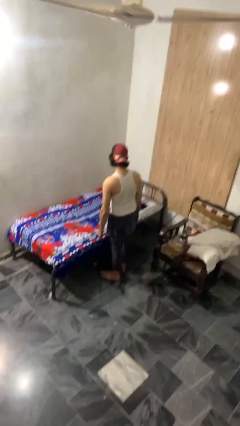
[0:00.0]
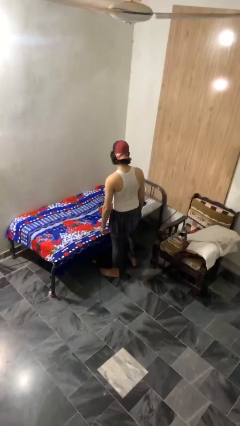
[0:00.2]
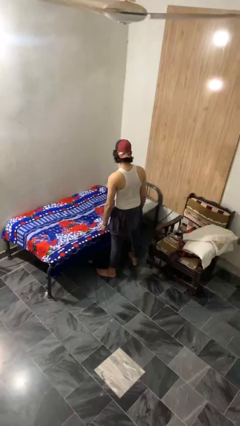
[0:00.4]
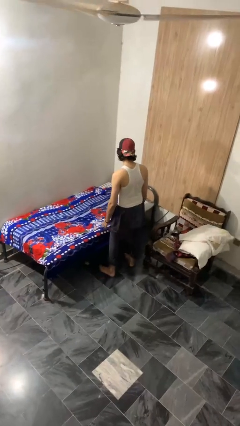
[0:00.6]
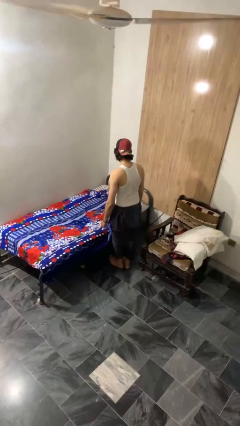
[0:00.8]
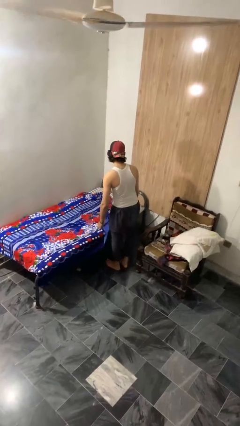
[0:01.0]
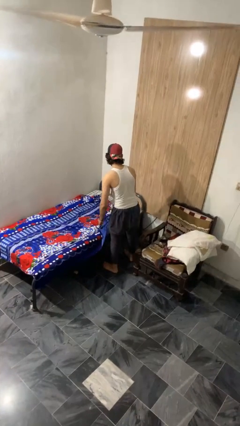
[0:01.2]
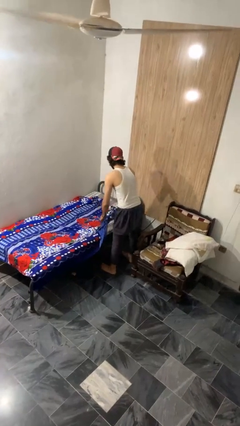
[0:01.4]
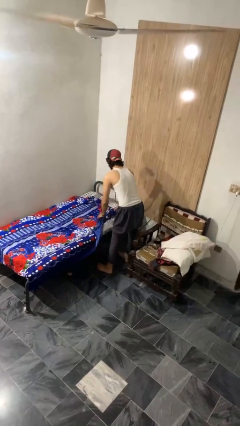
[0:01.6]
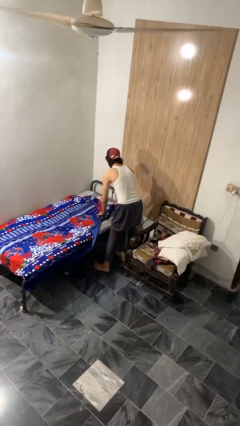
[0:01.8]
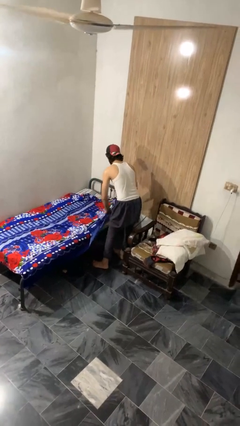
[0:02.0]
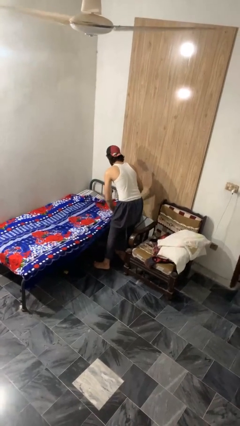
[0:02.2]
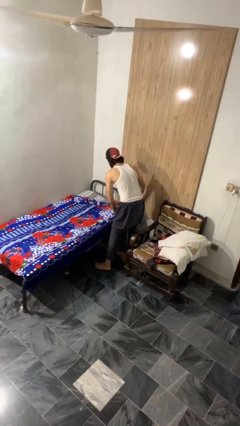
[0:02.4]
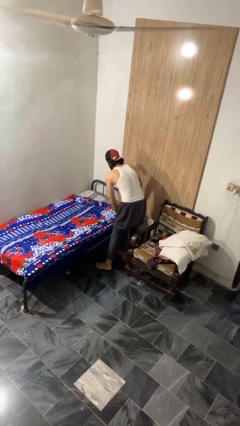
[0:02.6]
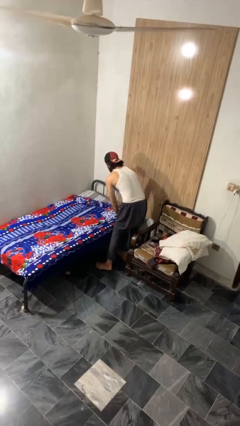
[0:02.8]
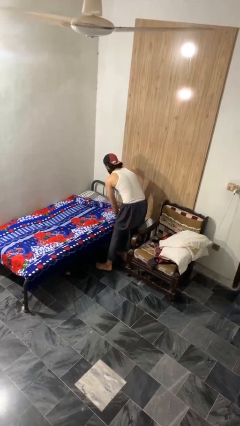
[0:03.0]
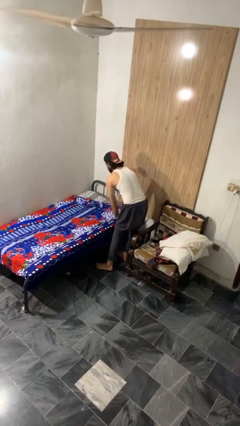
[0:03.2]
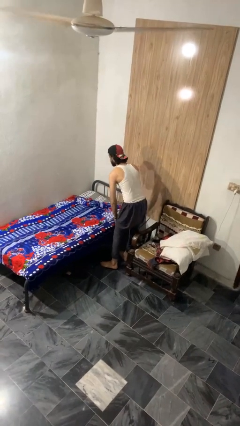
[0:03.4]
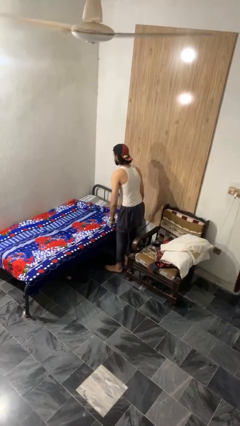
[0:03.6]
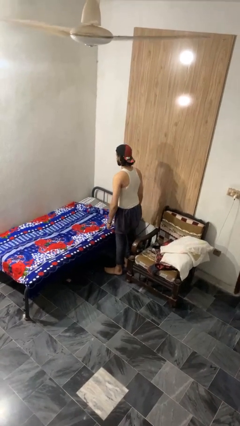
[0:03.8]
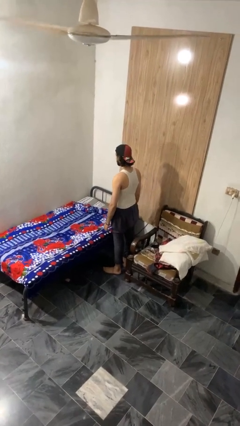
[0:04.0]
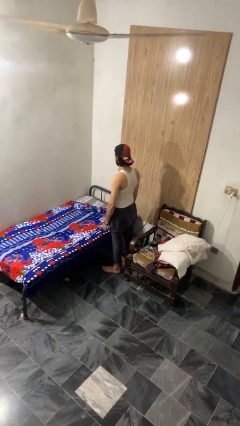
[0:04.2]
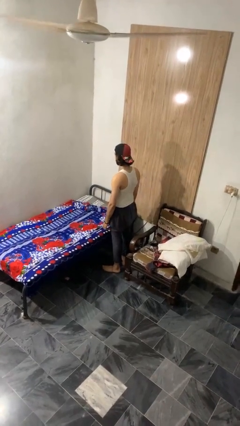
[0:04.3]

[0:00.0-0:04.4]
person makes bed

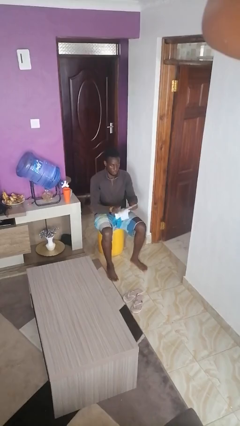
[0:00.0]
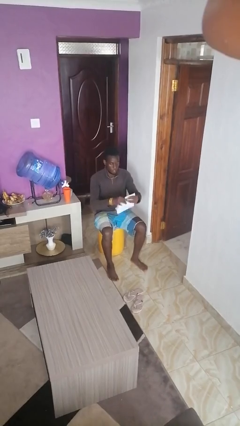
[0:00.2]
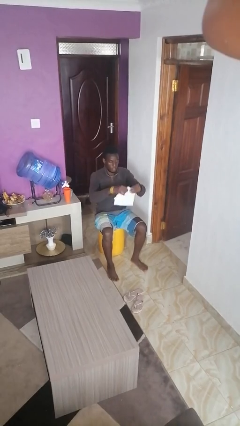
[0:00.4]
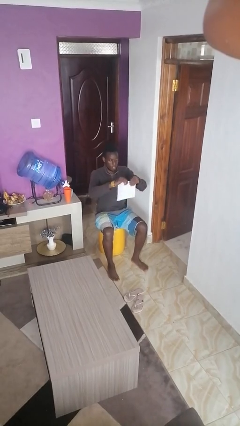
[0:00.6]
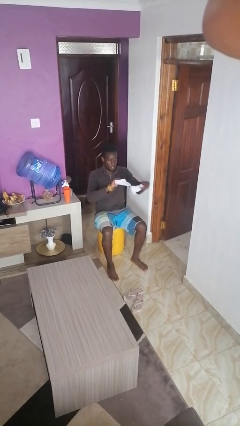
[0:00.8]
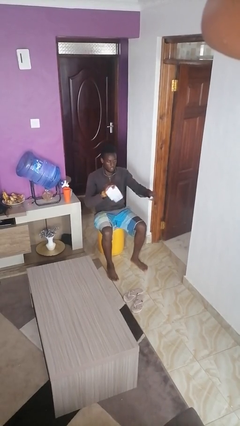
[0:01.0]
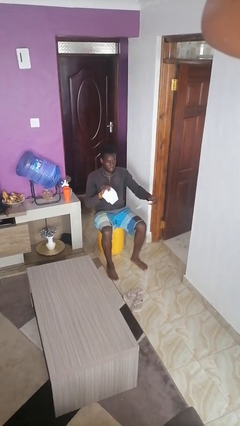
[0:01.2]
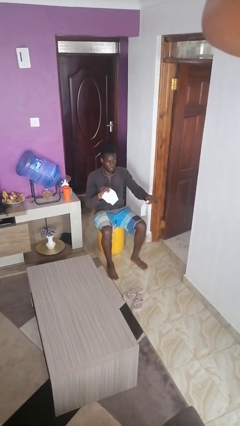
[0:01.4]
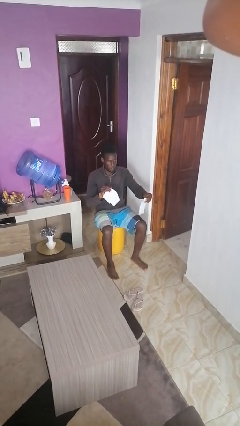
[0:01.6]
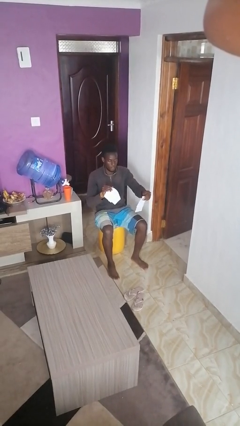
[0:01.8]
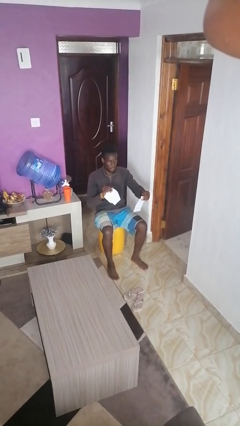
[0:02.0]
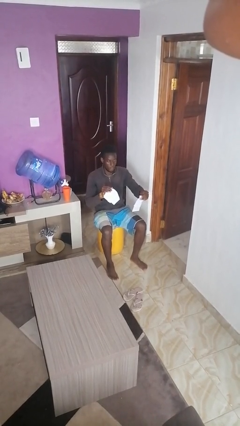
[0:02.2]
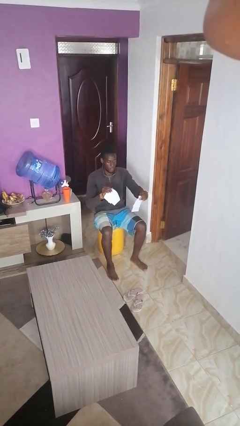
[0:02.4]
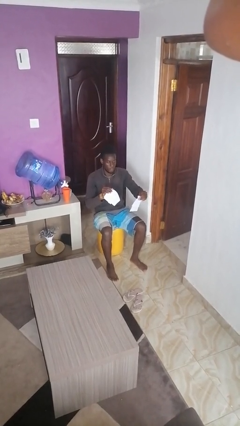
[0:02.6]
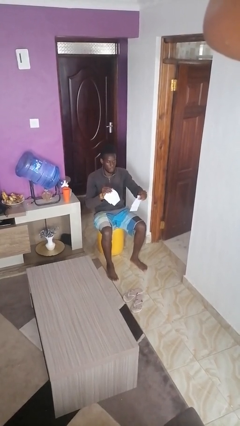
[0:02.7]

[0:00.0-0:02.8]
person tears paper

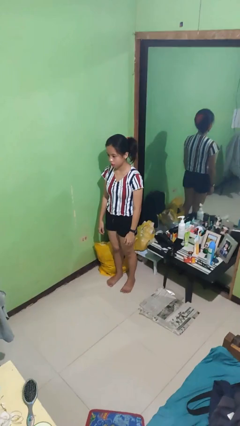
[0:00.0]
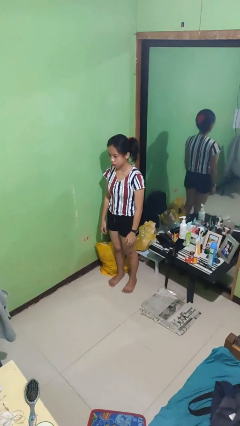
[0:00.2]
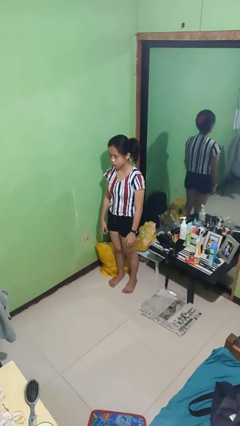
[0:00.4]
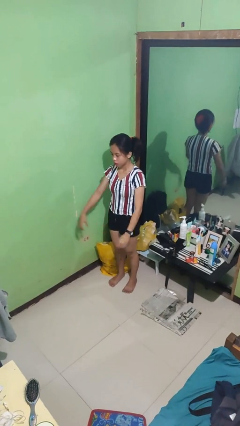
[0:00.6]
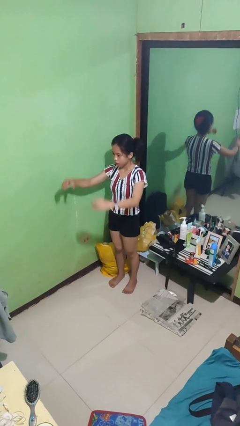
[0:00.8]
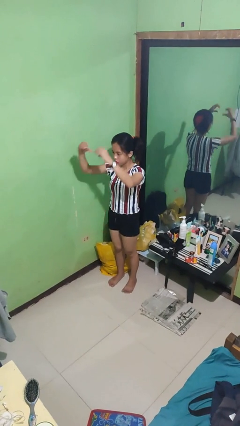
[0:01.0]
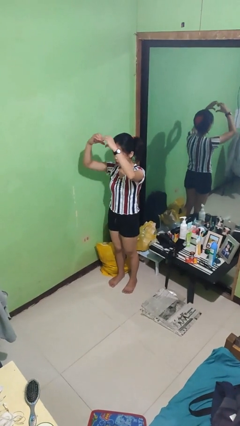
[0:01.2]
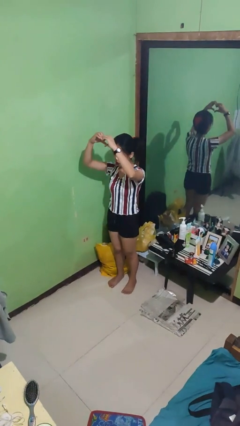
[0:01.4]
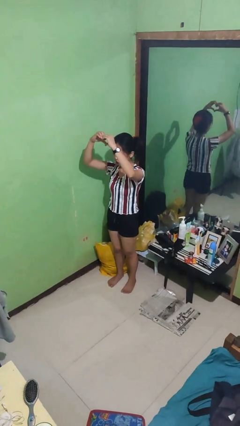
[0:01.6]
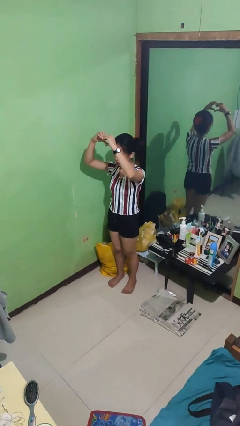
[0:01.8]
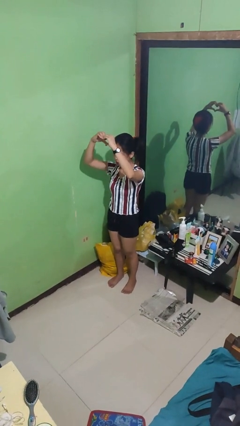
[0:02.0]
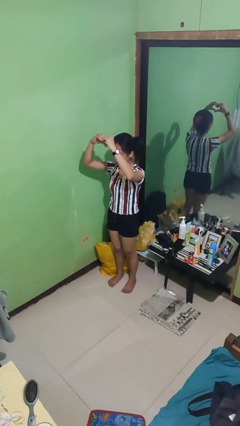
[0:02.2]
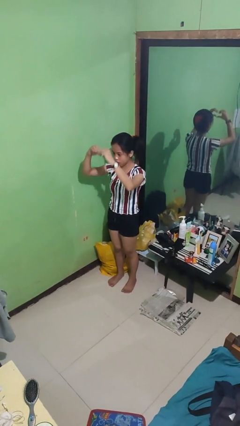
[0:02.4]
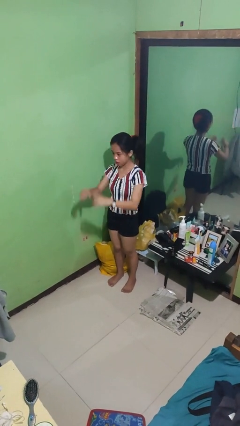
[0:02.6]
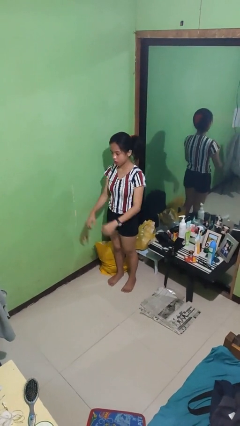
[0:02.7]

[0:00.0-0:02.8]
person gestures heart

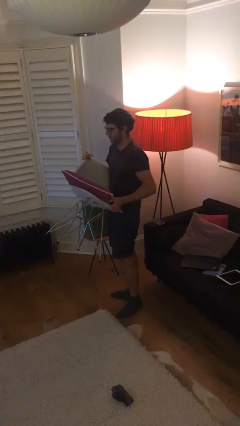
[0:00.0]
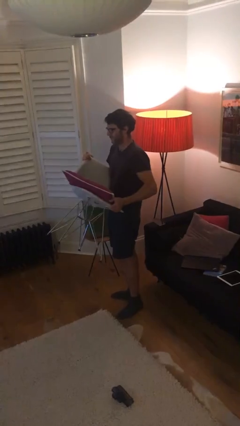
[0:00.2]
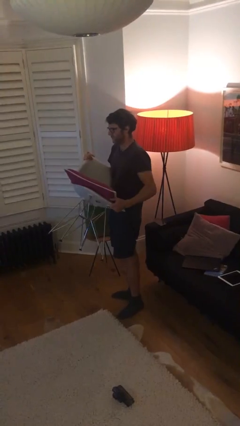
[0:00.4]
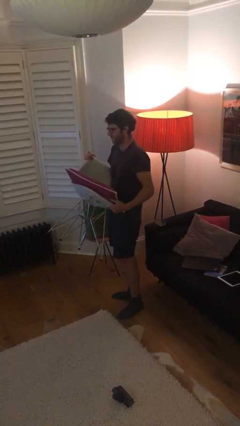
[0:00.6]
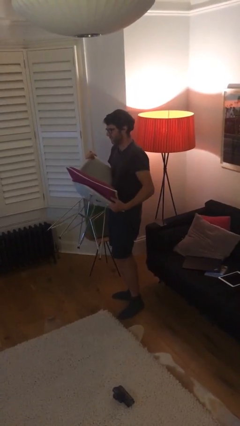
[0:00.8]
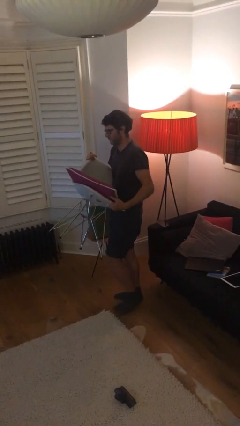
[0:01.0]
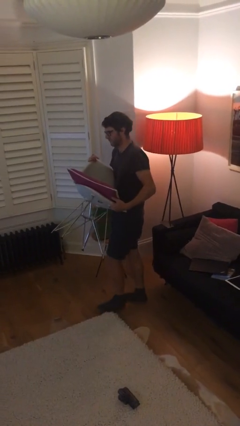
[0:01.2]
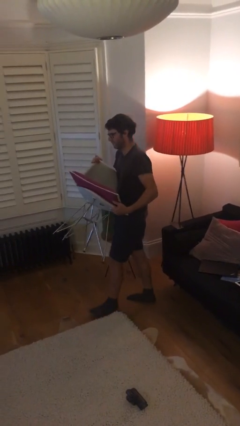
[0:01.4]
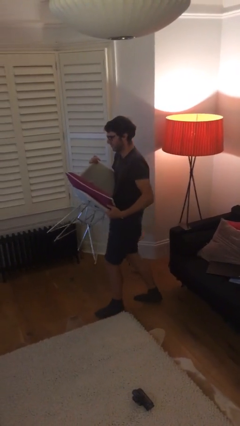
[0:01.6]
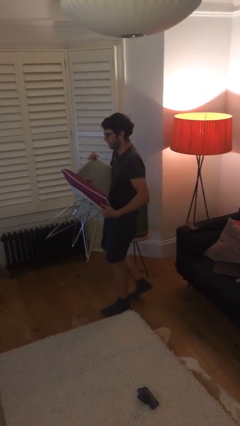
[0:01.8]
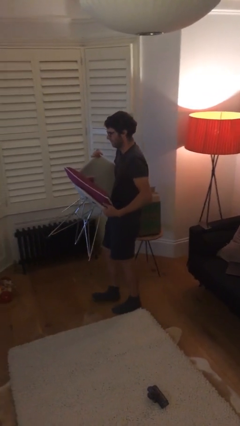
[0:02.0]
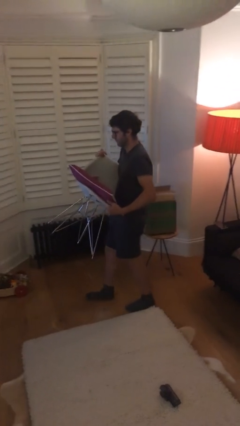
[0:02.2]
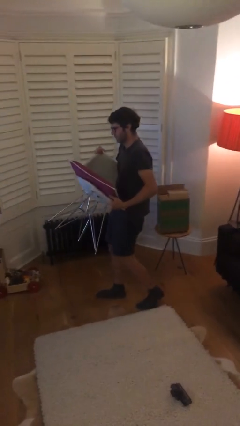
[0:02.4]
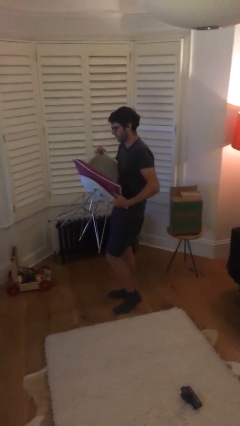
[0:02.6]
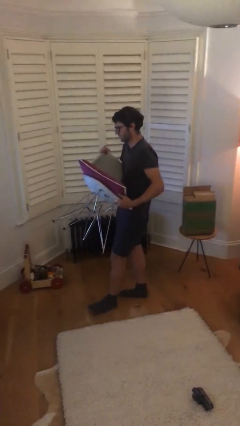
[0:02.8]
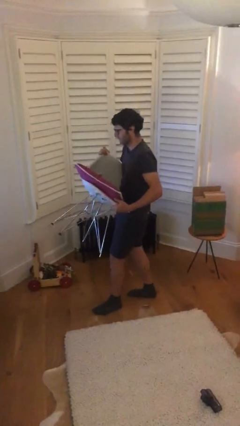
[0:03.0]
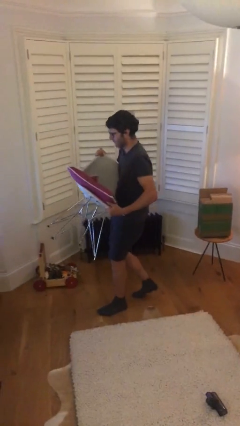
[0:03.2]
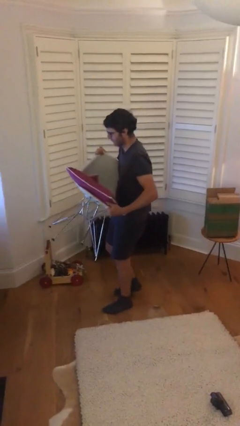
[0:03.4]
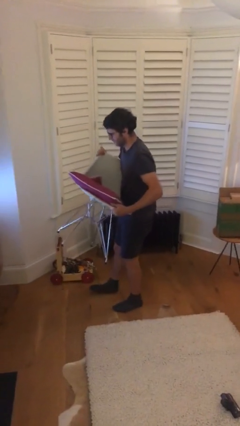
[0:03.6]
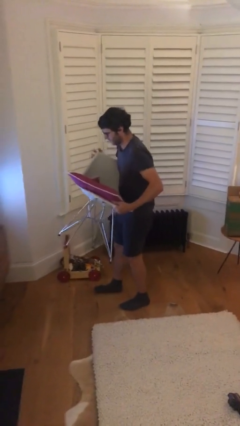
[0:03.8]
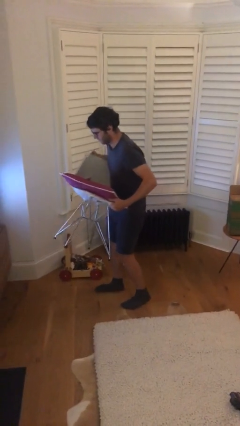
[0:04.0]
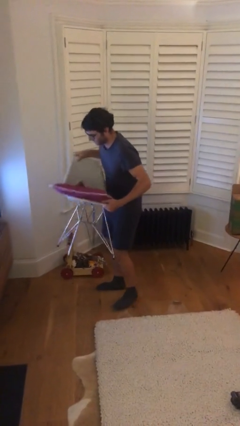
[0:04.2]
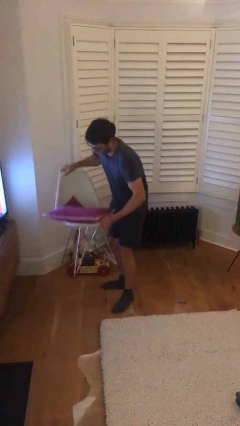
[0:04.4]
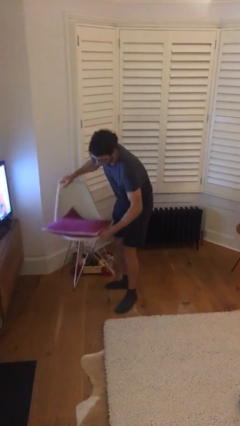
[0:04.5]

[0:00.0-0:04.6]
person carries heavy object

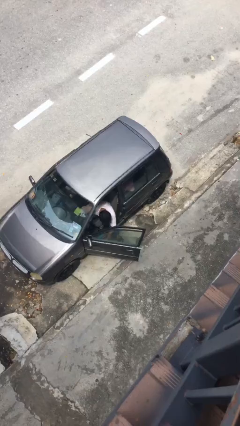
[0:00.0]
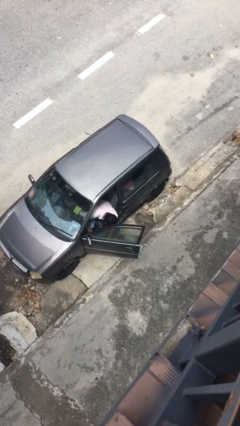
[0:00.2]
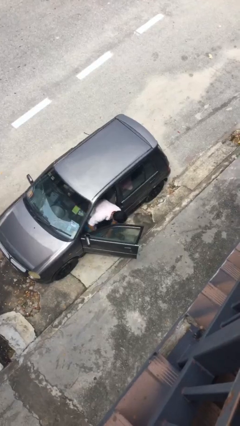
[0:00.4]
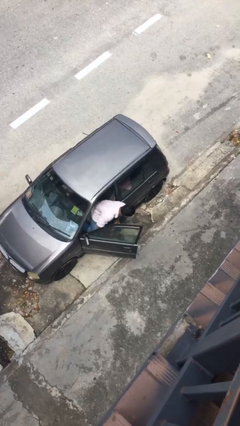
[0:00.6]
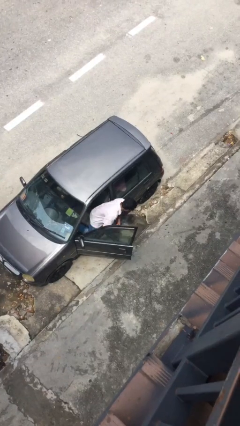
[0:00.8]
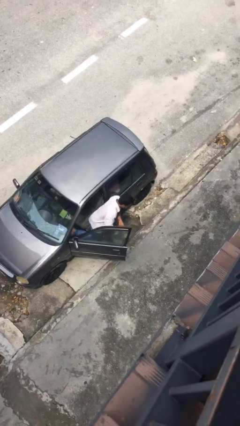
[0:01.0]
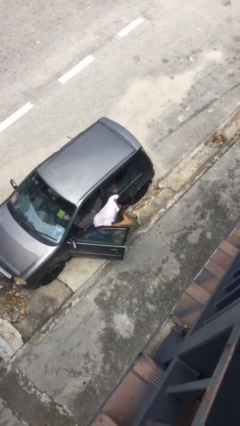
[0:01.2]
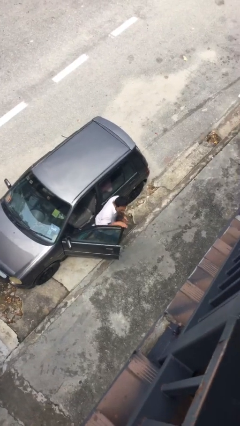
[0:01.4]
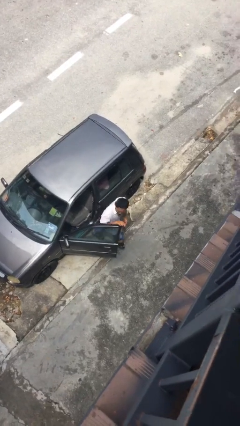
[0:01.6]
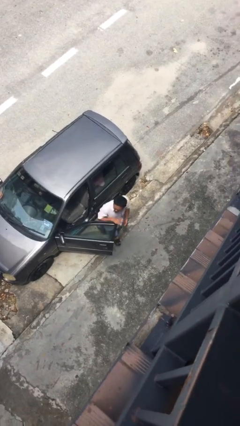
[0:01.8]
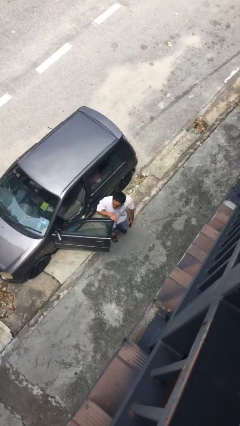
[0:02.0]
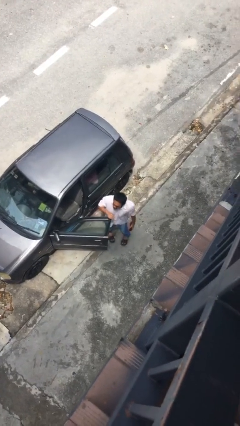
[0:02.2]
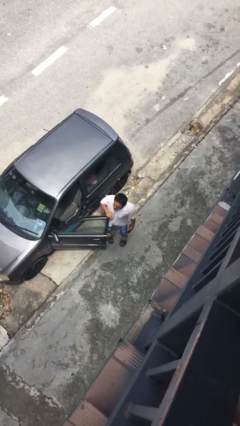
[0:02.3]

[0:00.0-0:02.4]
person exits car

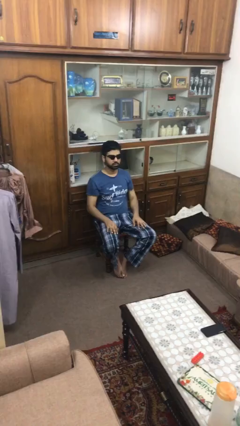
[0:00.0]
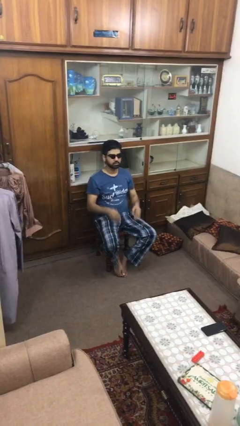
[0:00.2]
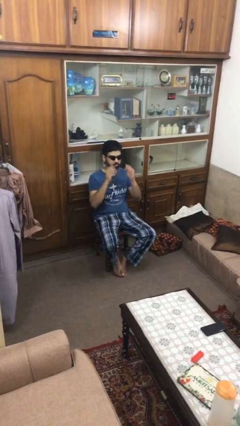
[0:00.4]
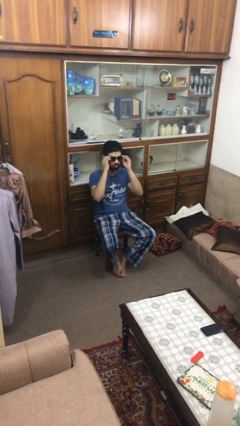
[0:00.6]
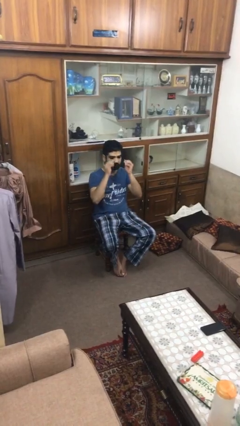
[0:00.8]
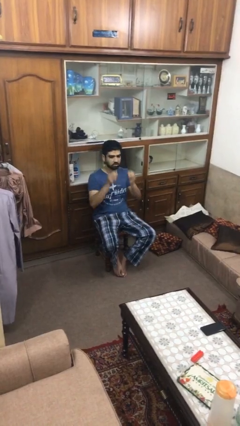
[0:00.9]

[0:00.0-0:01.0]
person takes off sunglasses
